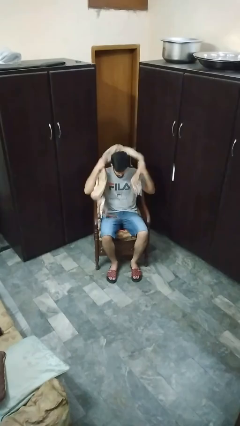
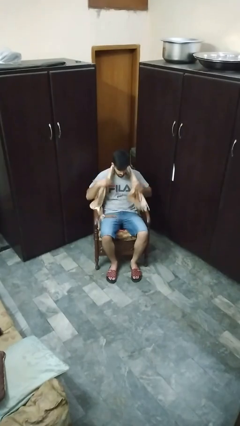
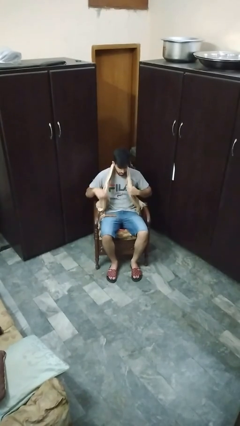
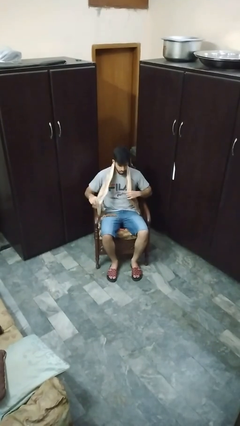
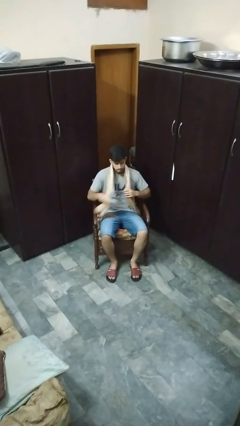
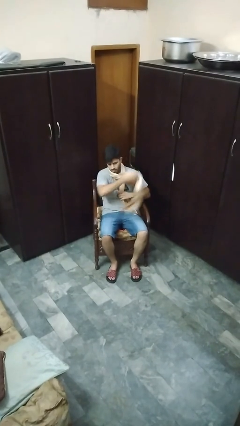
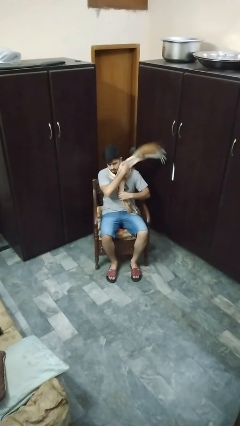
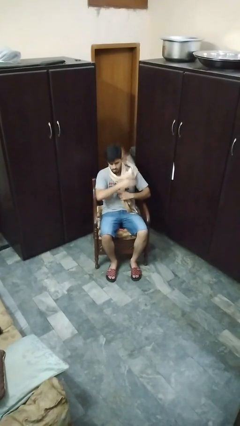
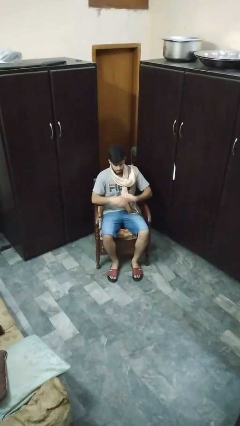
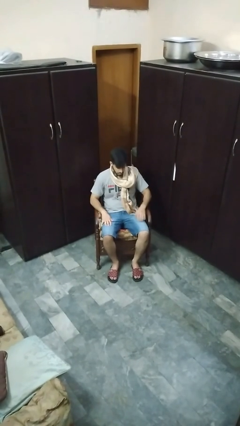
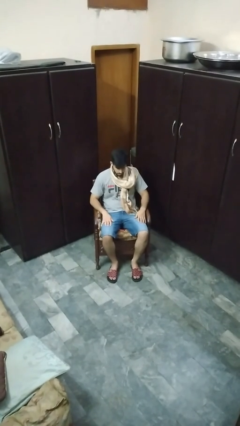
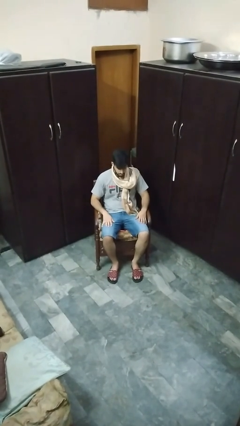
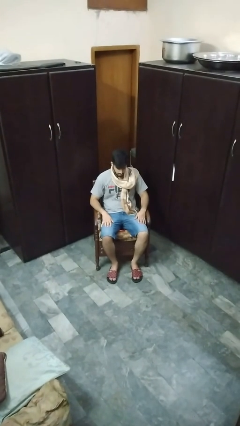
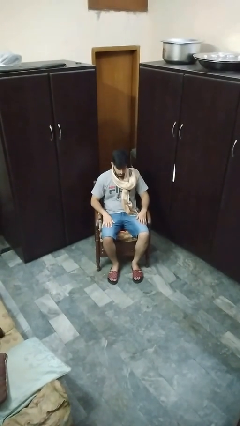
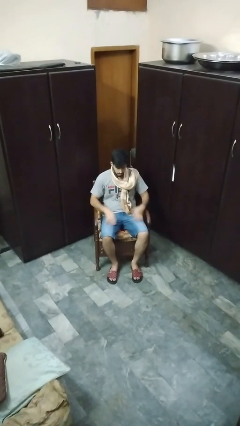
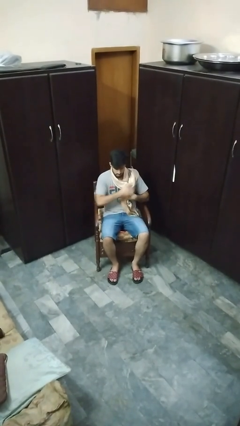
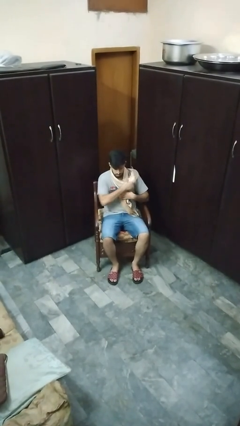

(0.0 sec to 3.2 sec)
person puts on scarf

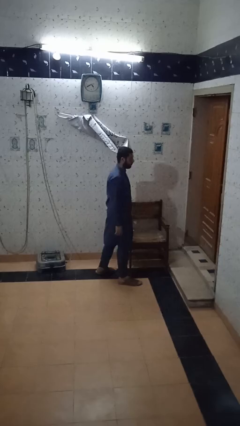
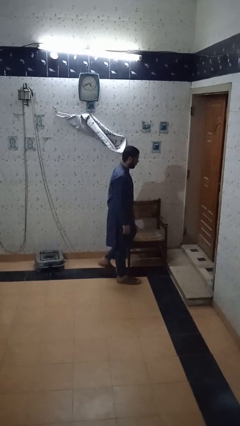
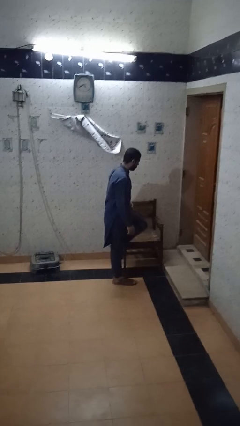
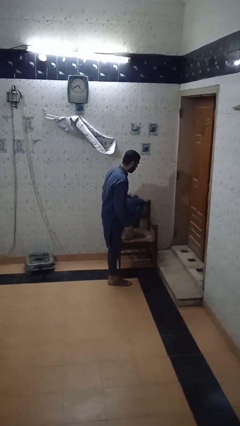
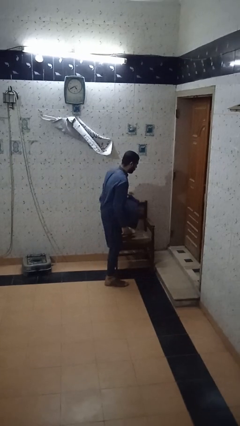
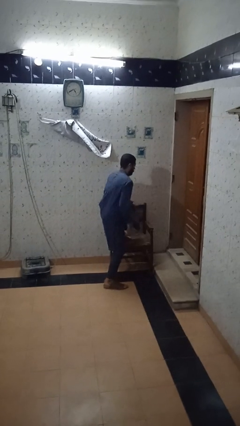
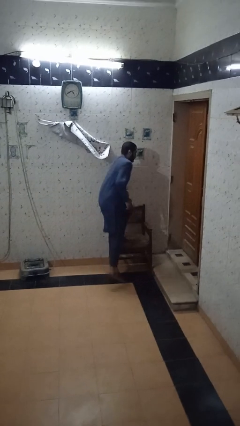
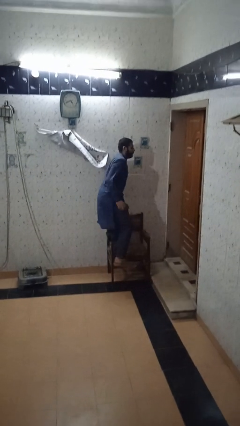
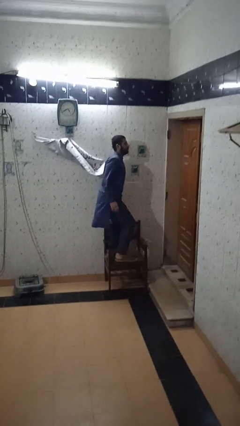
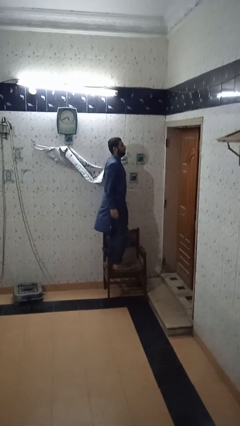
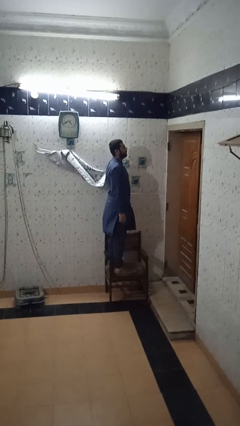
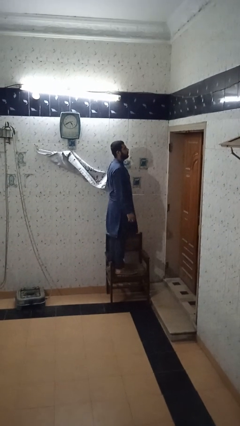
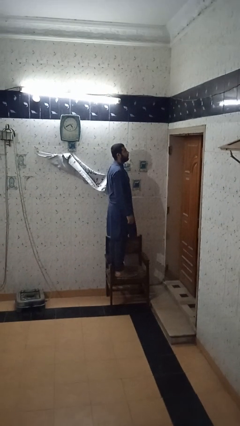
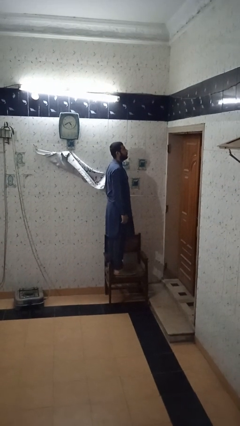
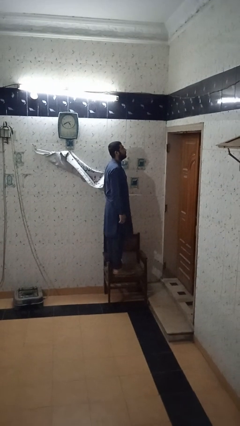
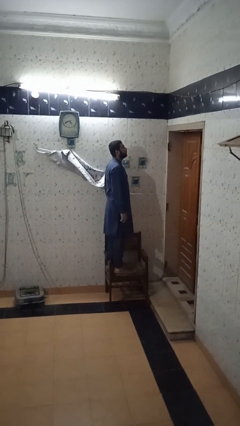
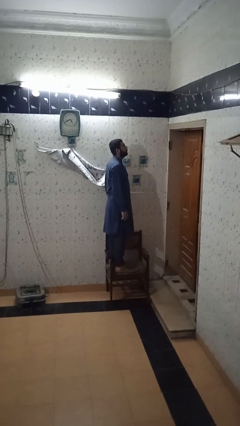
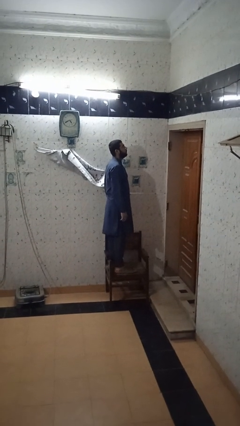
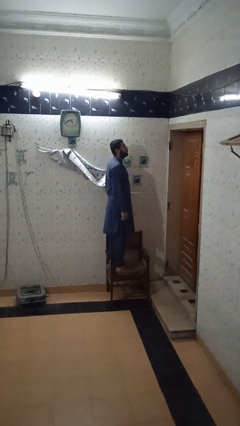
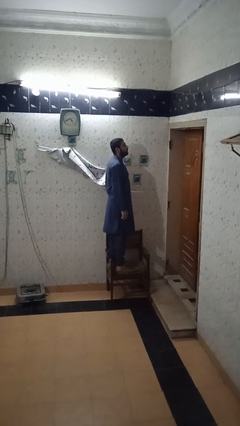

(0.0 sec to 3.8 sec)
person climbs on chair

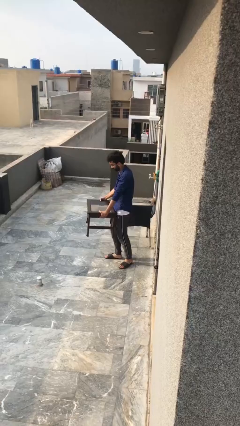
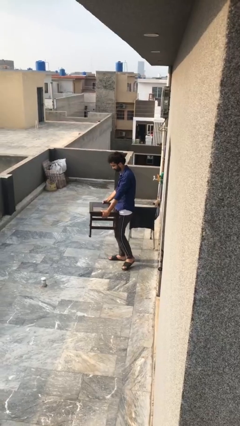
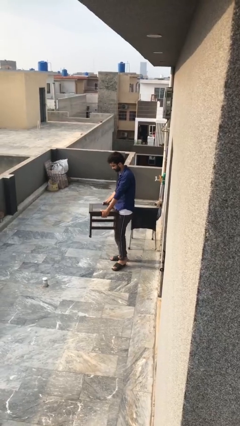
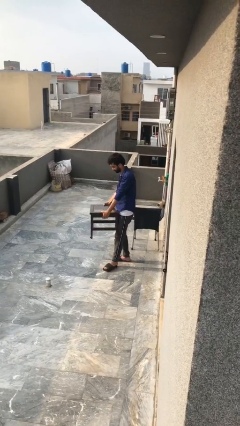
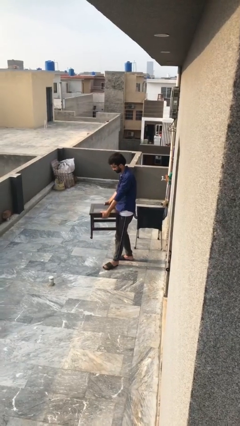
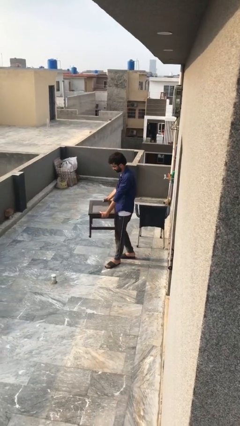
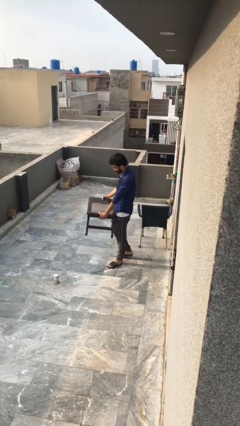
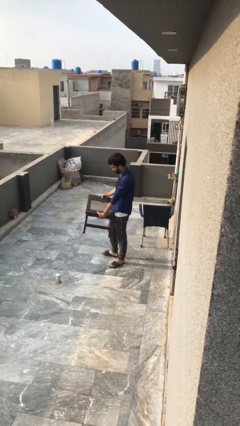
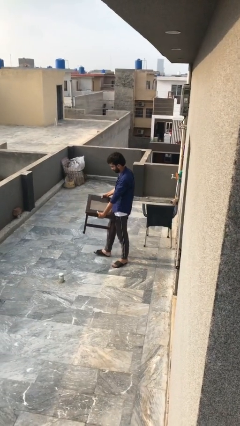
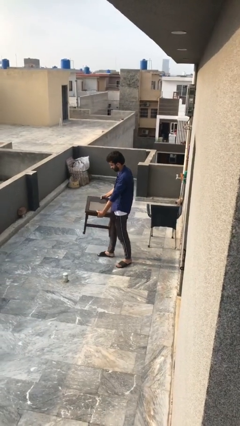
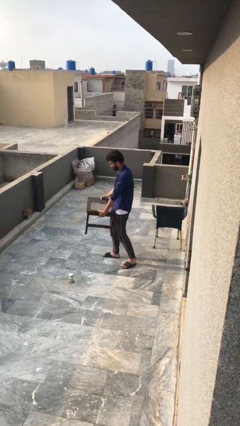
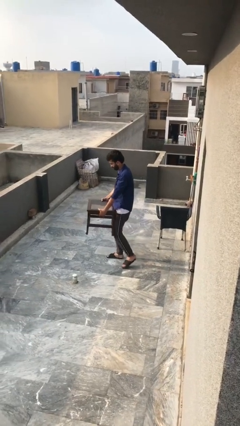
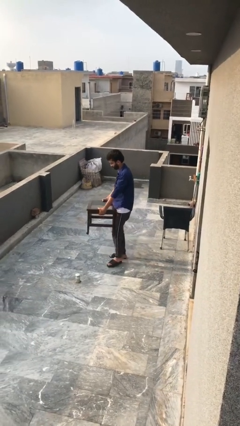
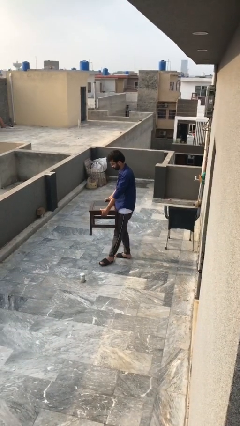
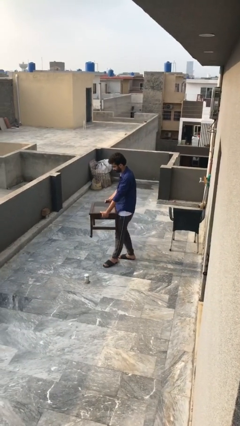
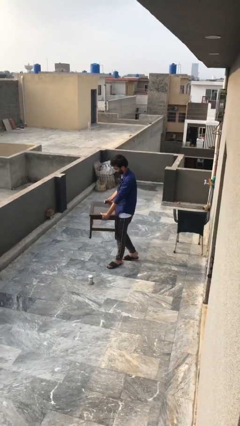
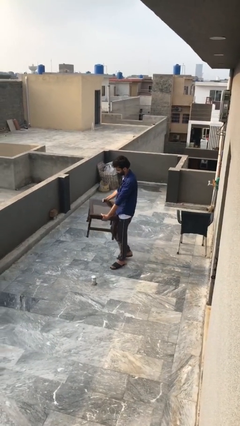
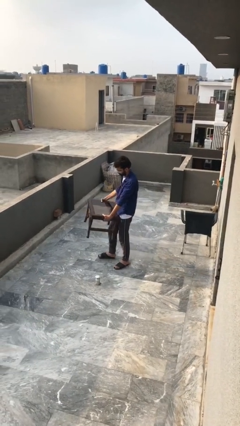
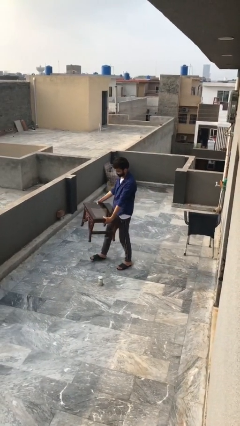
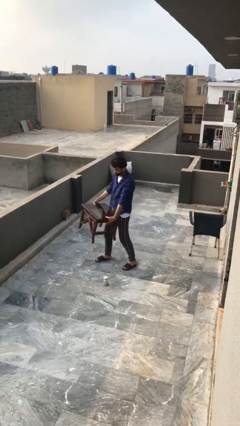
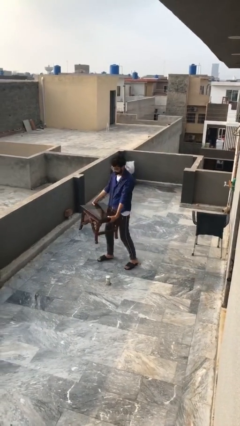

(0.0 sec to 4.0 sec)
person carries heavy object

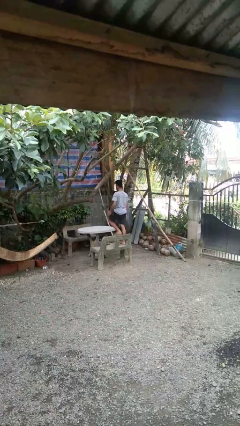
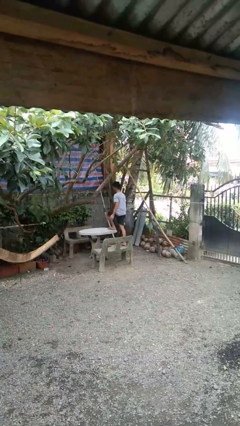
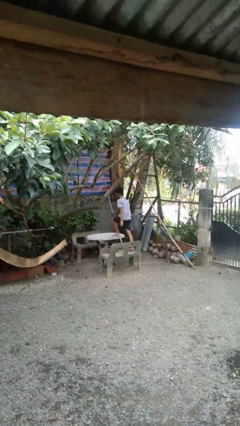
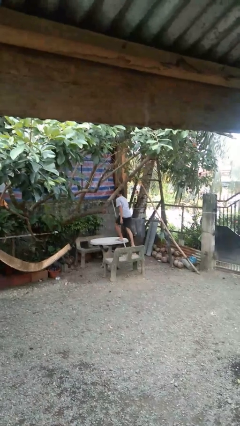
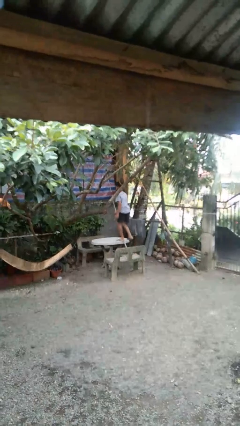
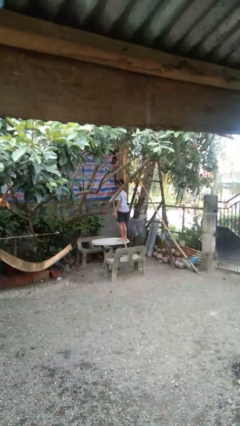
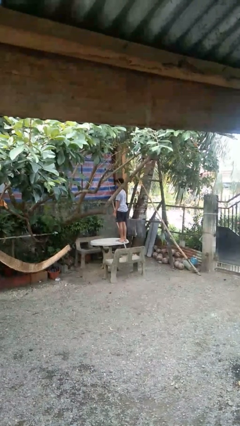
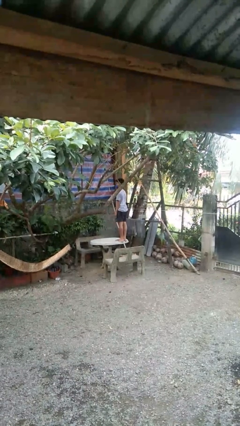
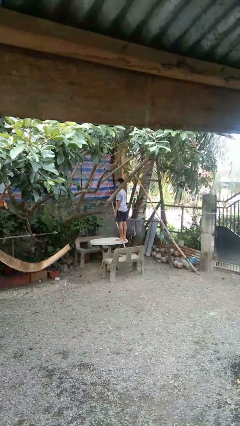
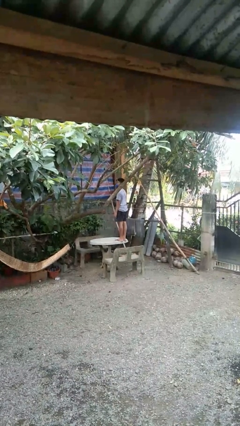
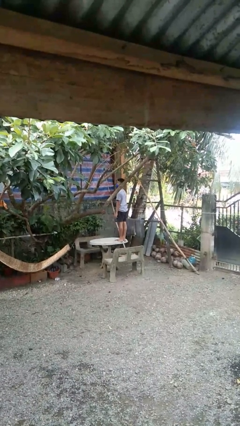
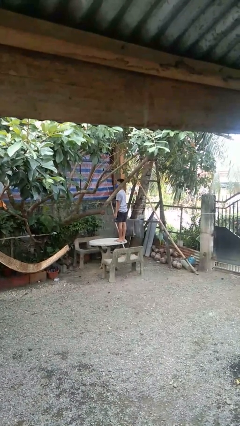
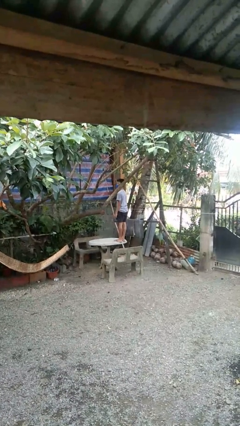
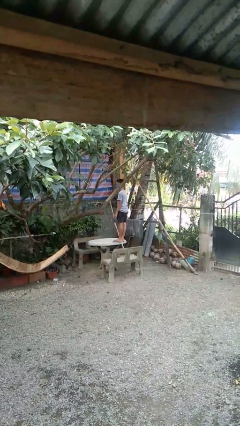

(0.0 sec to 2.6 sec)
person climbs on table

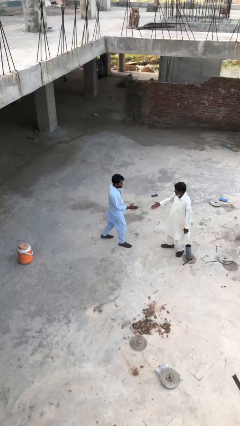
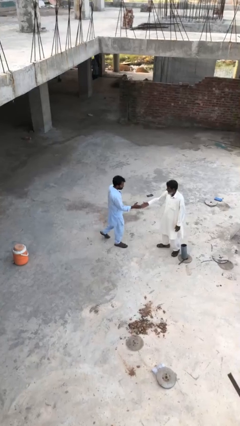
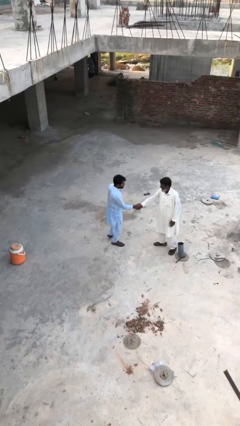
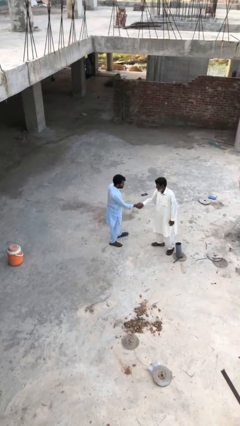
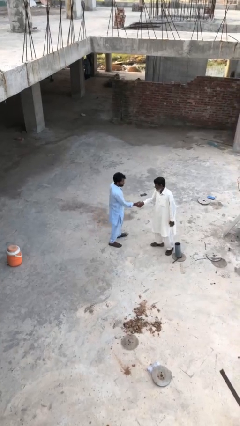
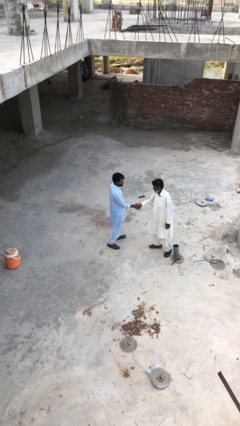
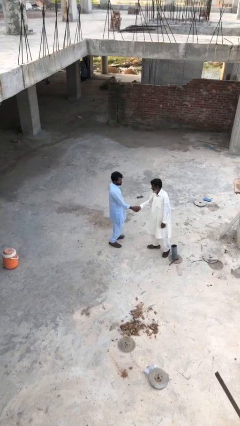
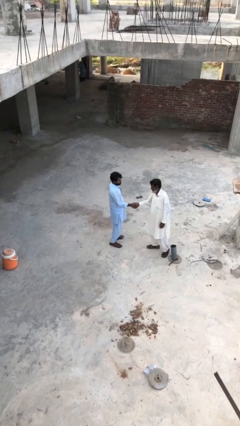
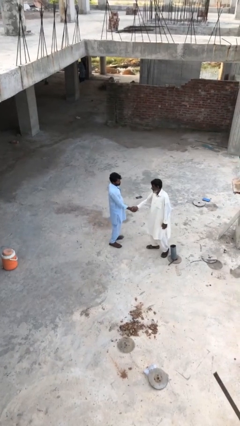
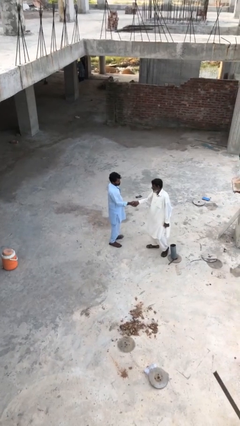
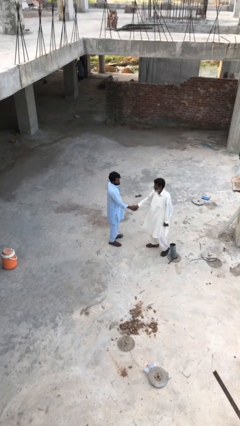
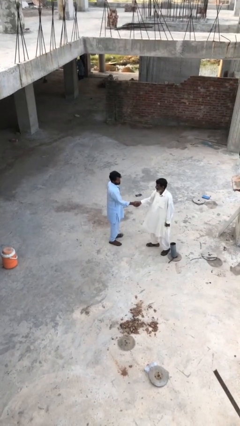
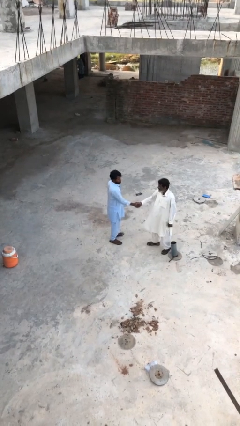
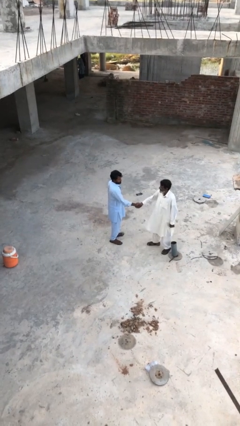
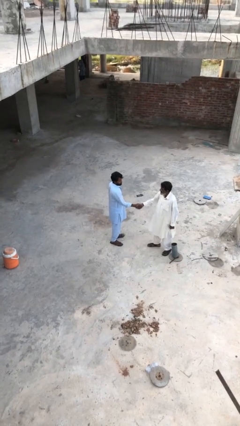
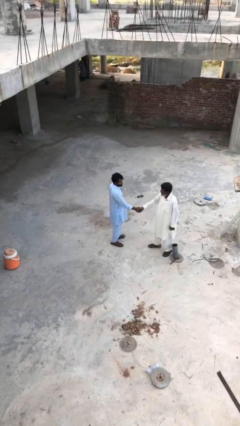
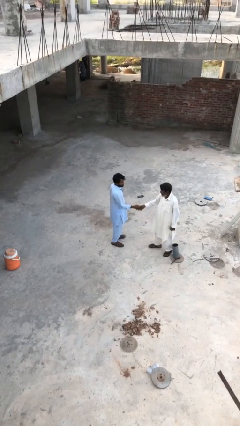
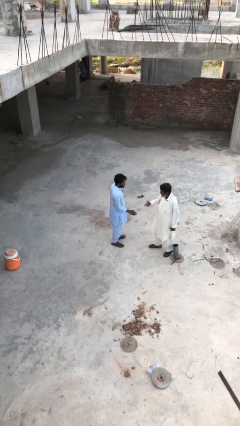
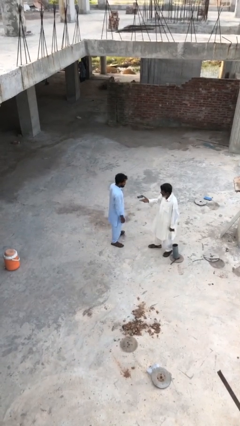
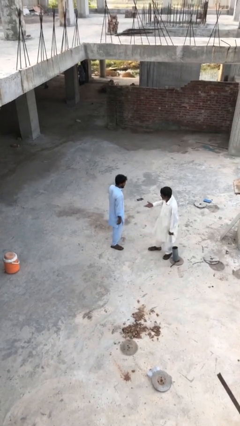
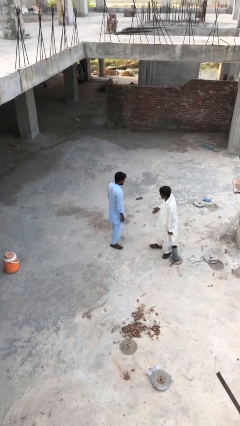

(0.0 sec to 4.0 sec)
person shakes hand

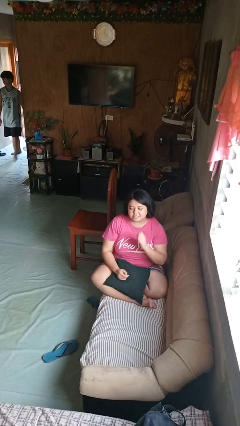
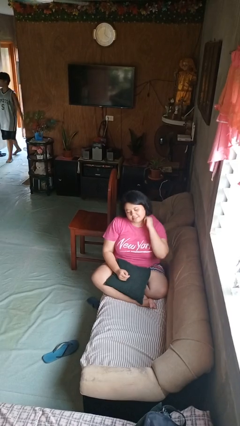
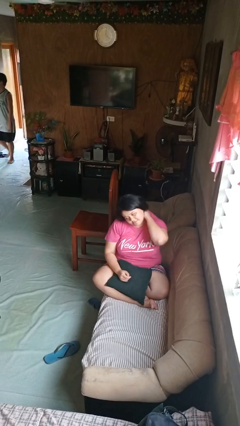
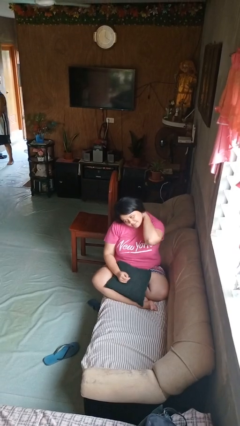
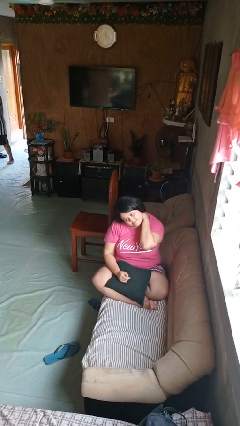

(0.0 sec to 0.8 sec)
person rubs neck
